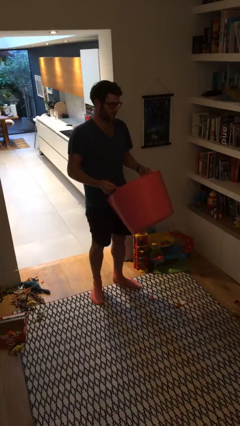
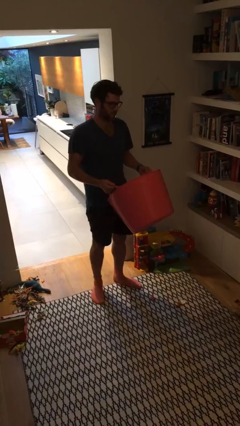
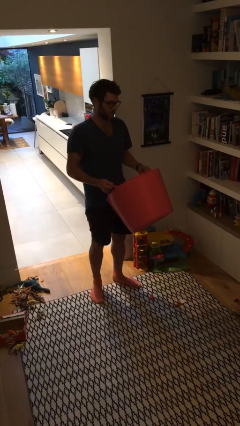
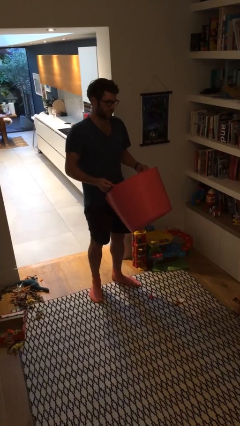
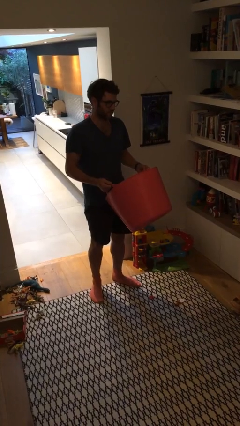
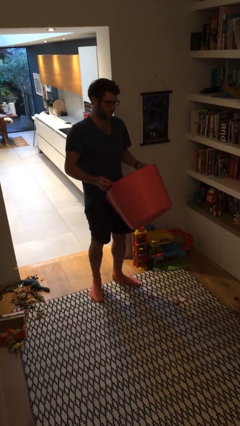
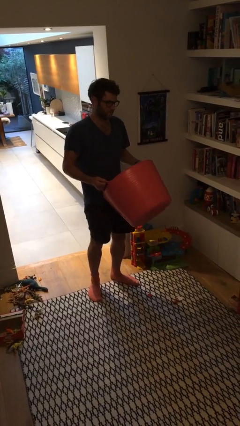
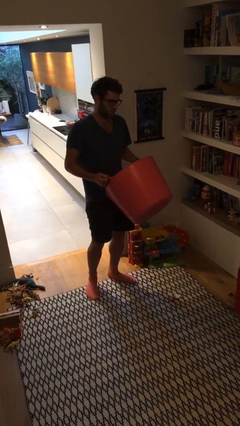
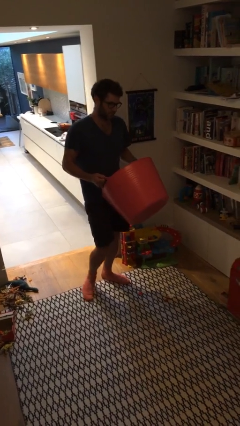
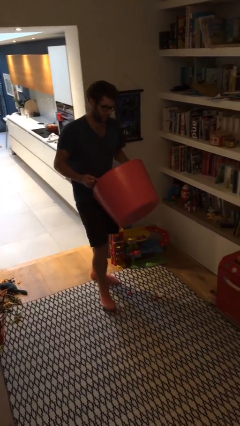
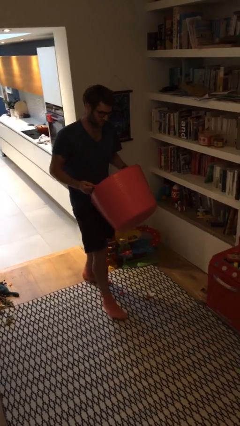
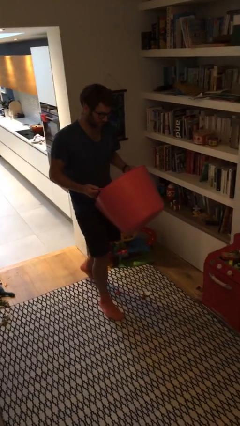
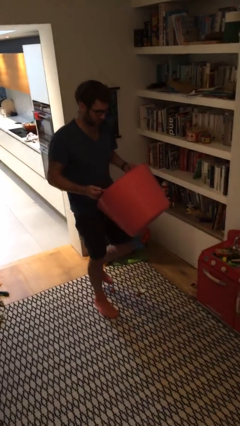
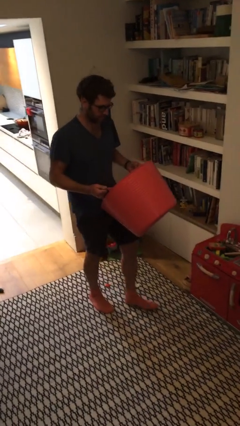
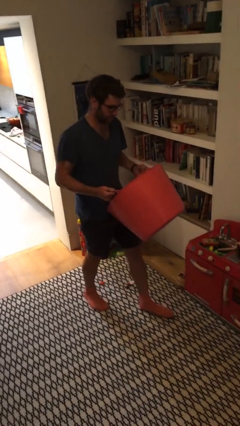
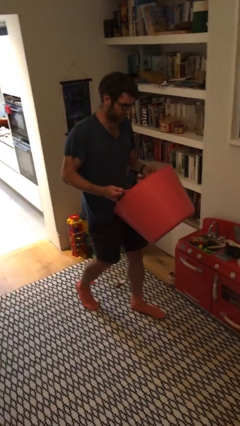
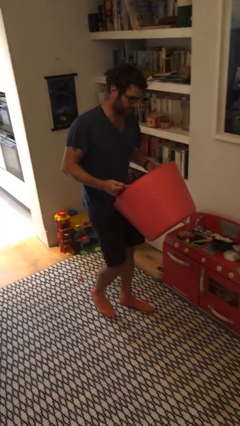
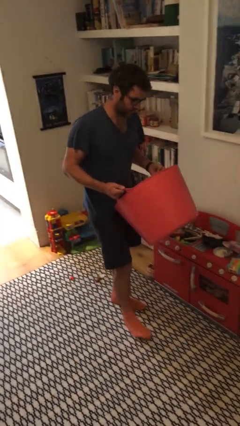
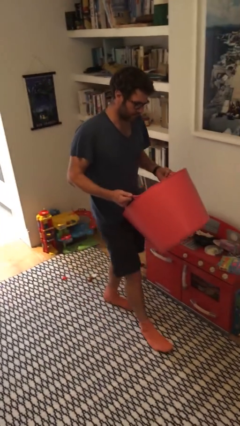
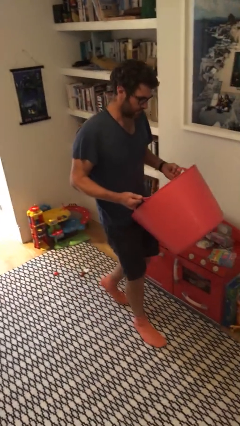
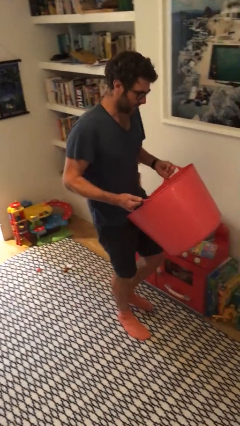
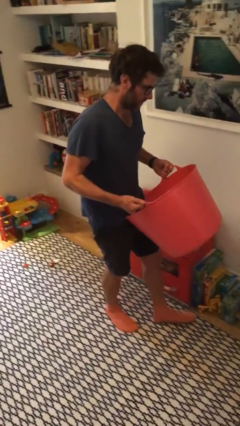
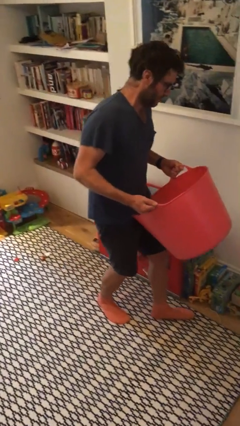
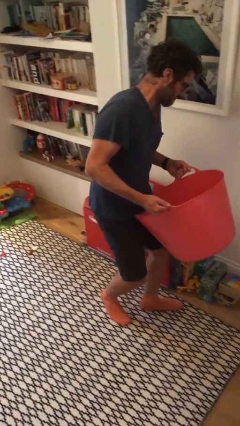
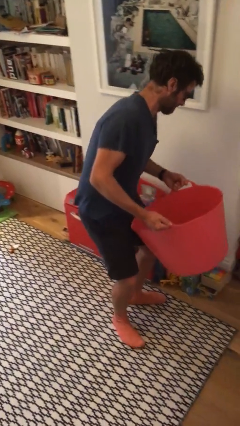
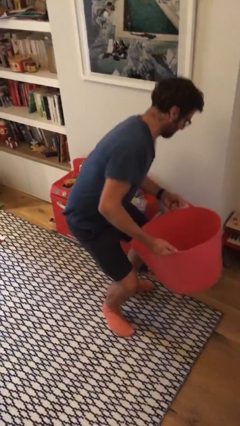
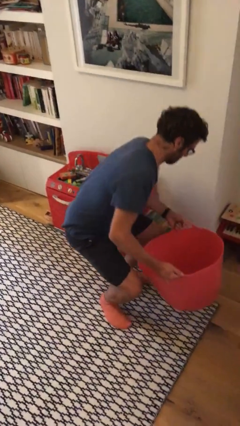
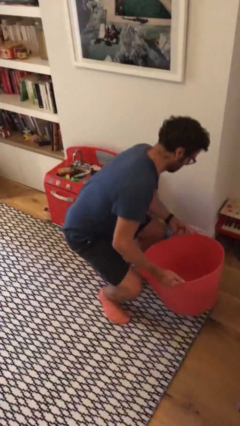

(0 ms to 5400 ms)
person carries heavy object

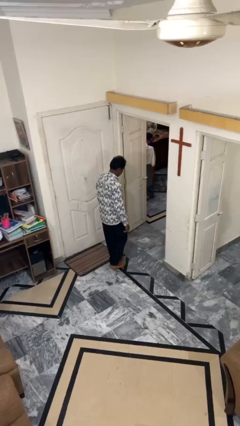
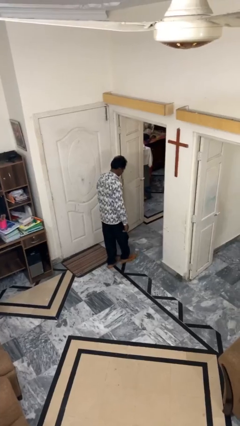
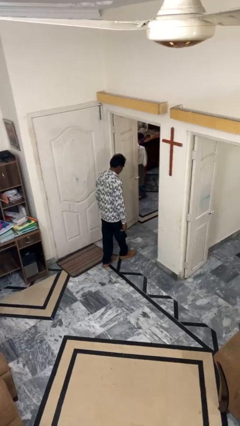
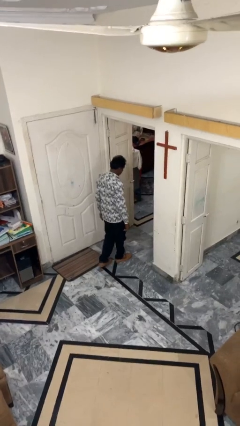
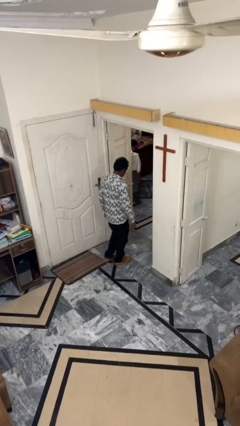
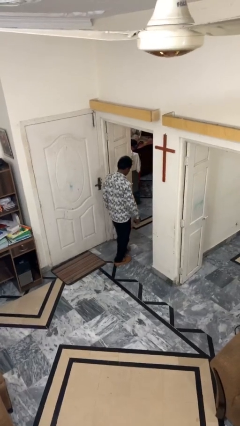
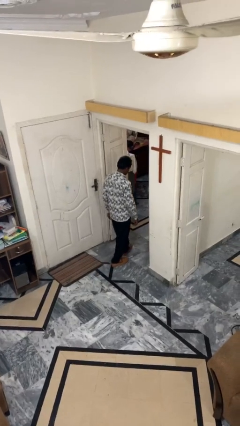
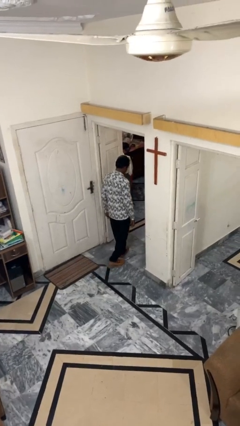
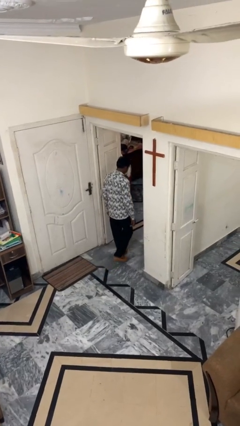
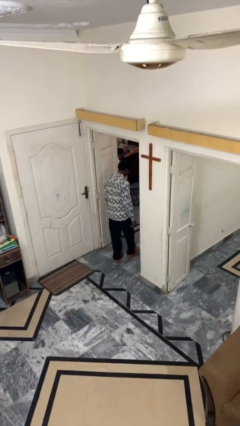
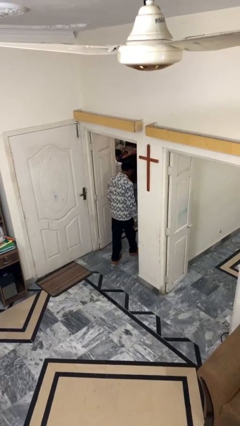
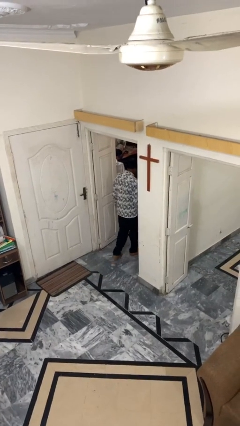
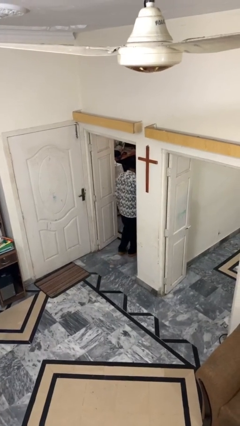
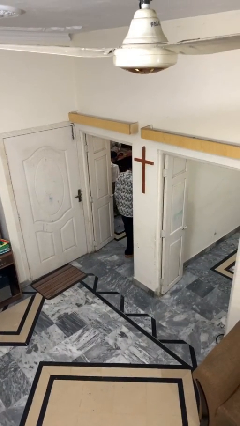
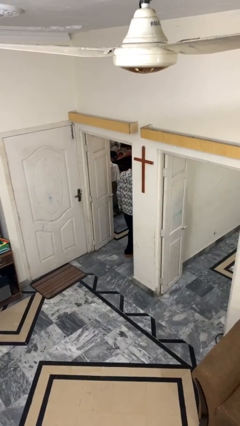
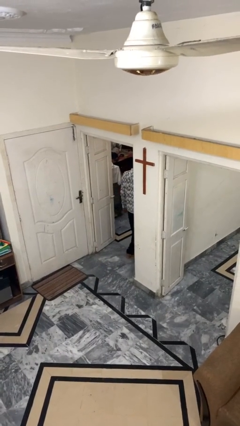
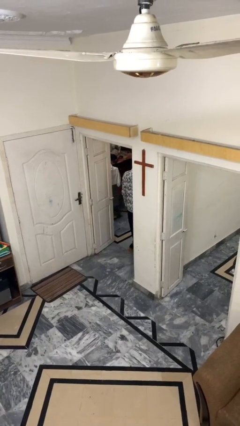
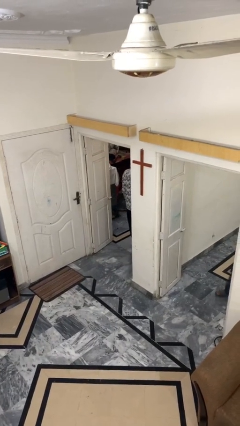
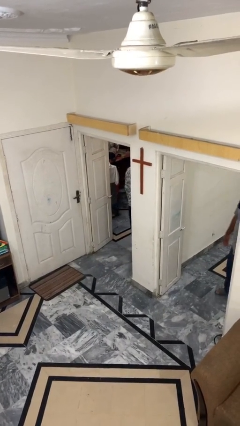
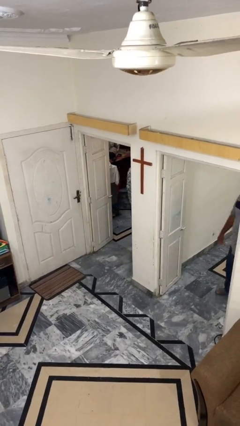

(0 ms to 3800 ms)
person exits scene through structure

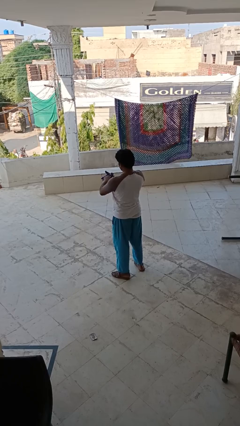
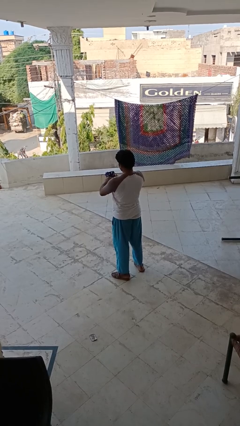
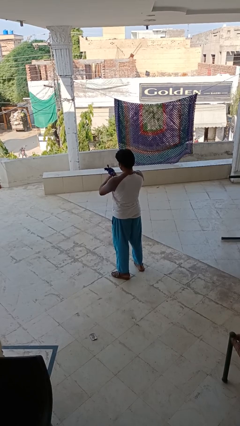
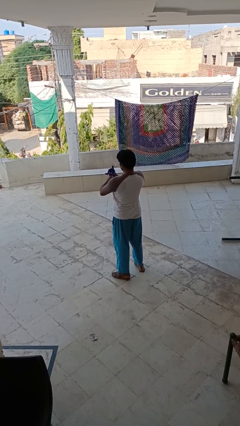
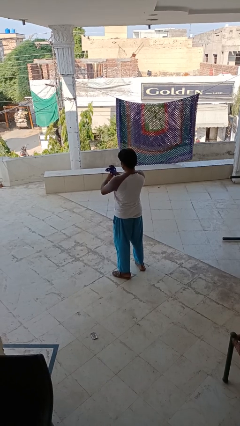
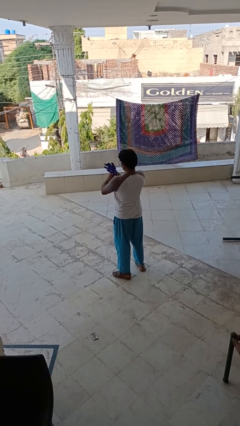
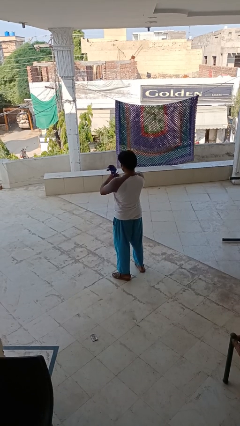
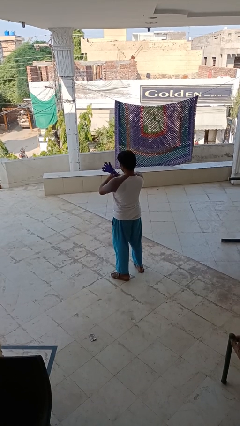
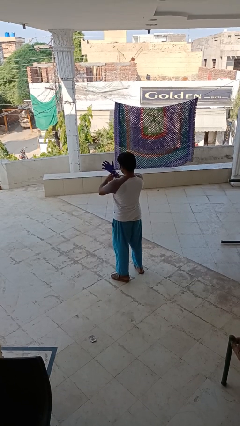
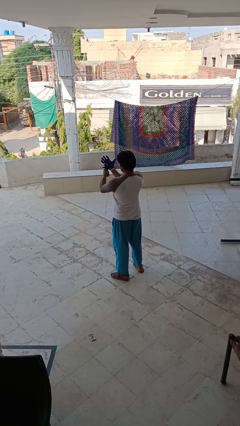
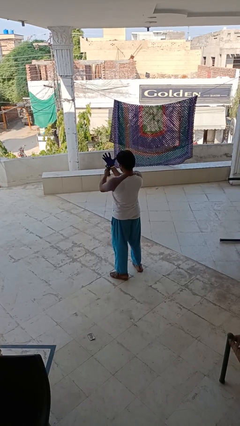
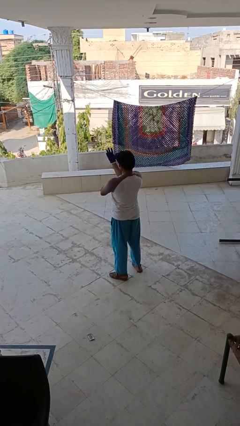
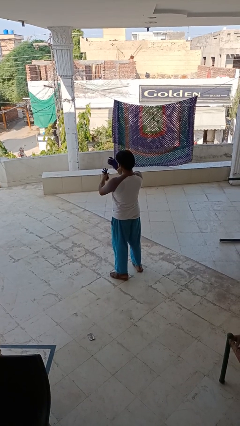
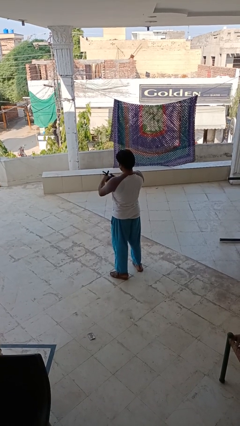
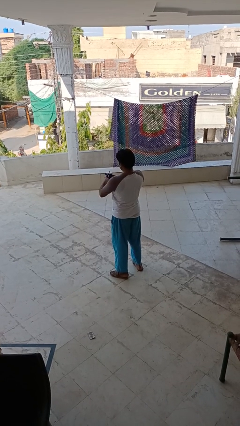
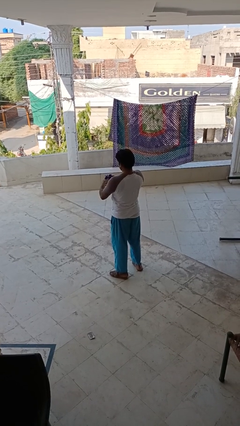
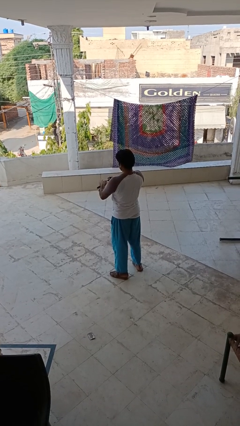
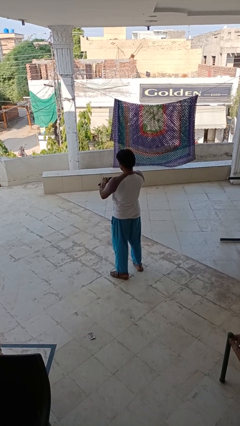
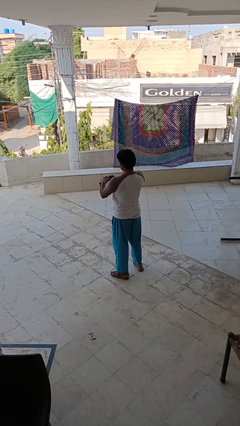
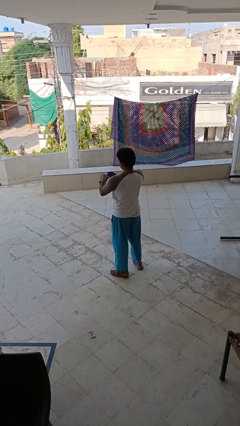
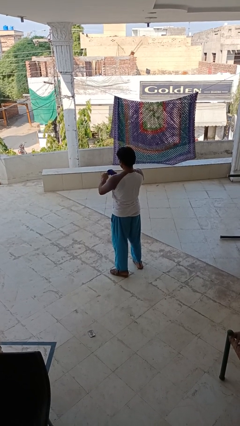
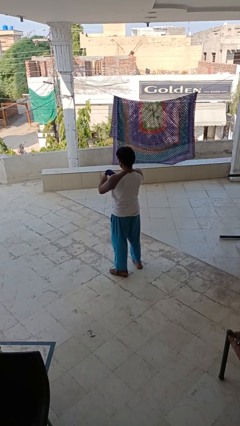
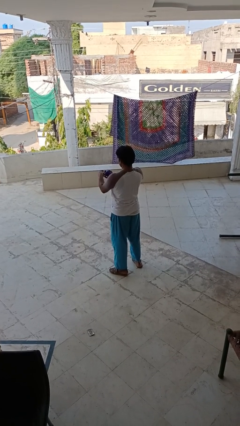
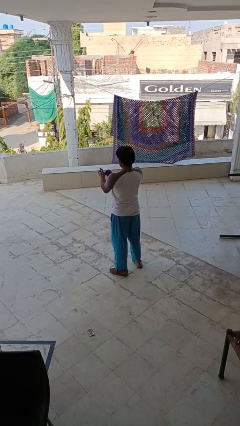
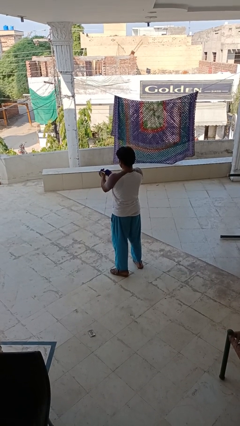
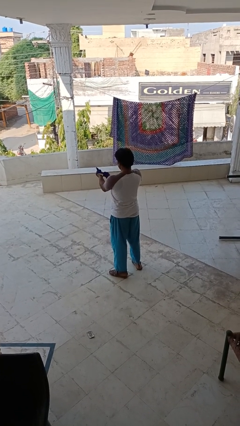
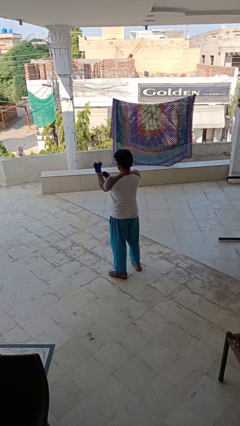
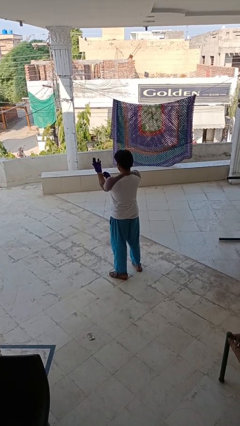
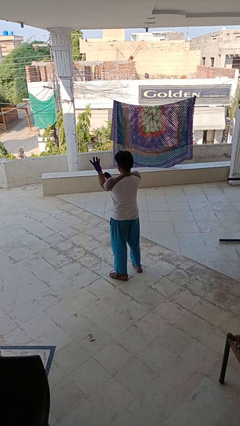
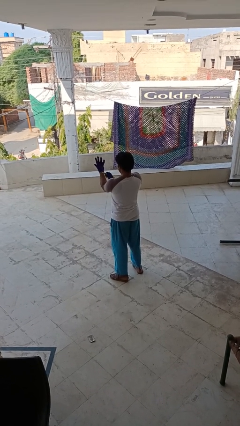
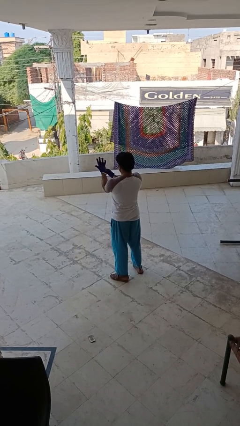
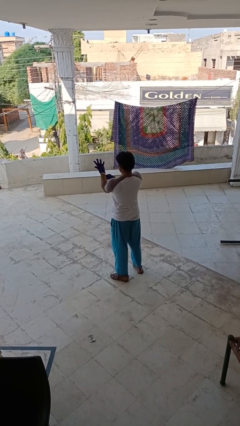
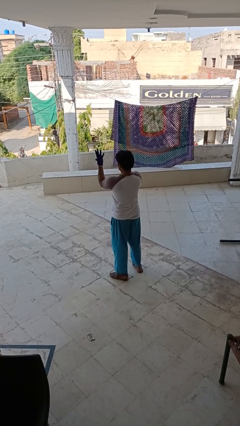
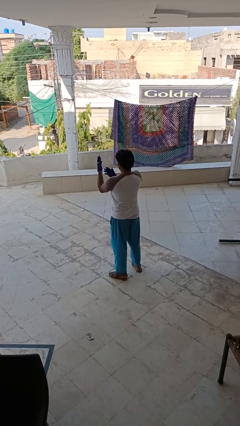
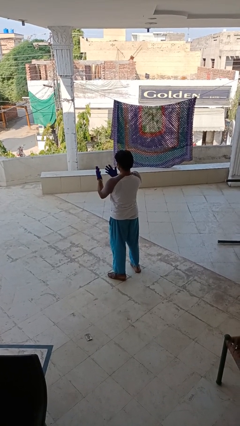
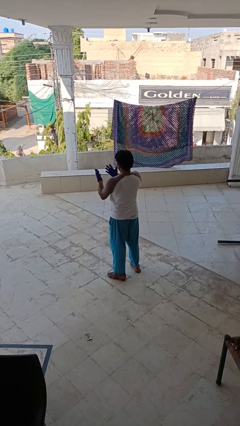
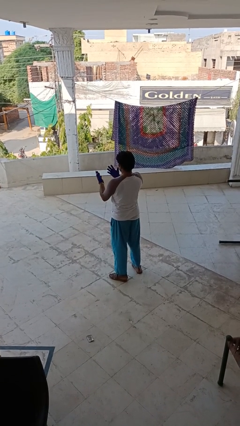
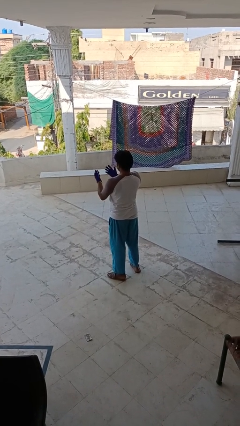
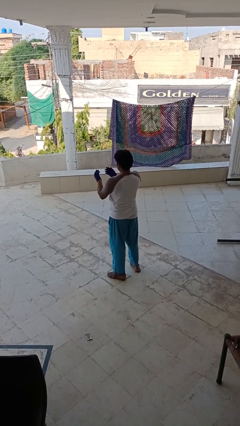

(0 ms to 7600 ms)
person puts on gloves

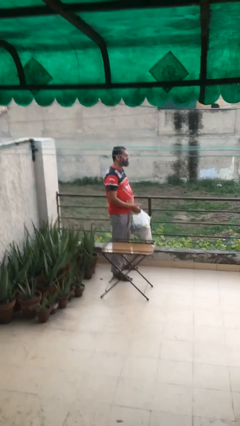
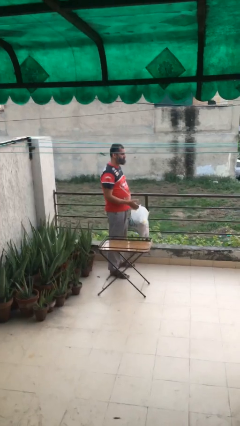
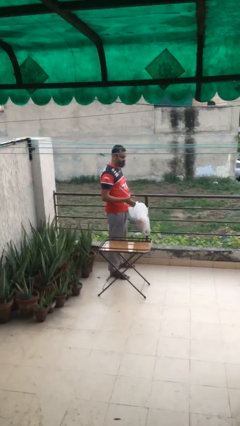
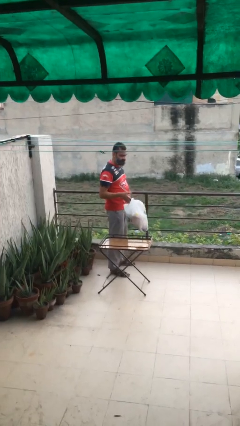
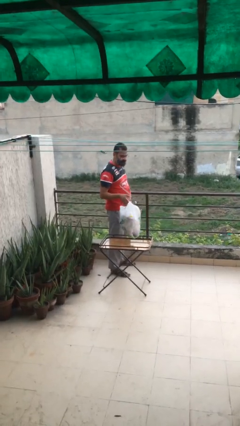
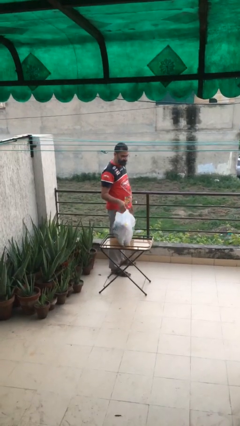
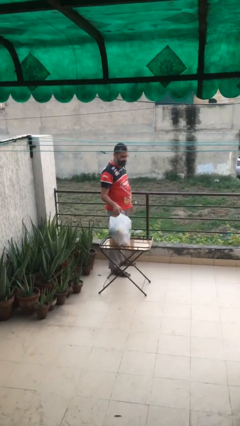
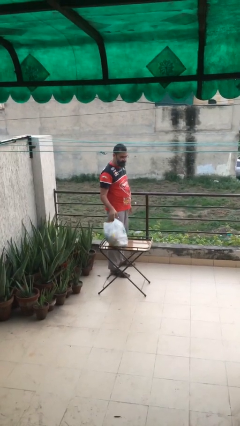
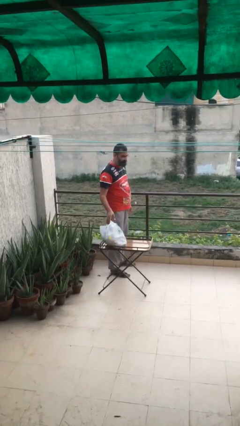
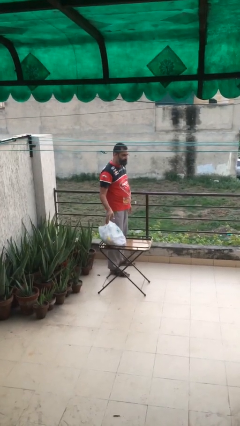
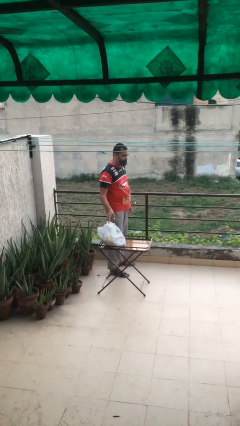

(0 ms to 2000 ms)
person puts down object on table
